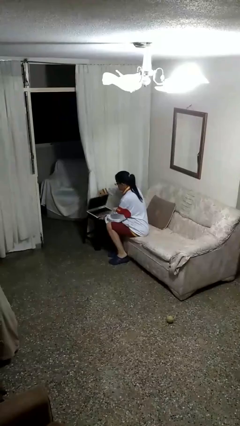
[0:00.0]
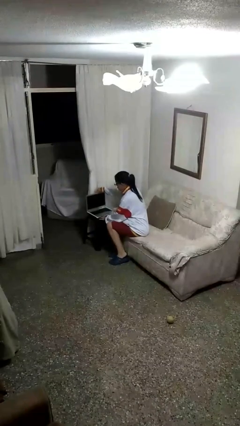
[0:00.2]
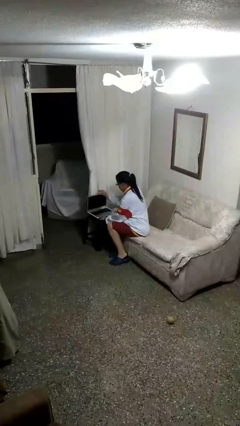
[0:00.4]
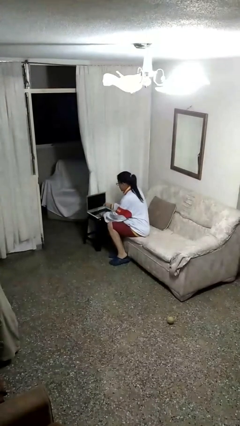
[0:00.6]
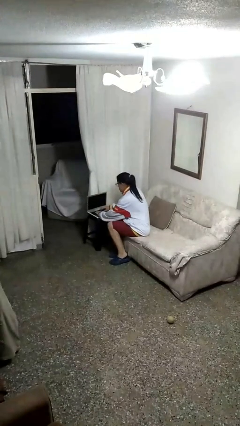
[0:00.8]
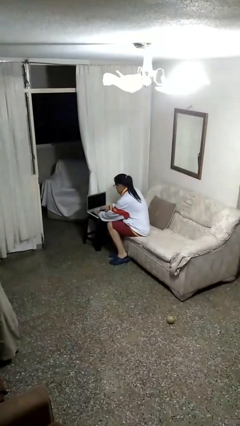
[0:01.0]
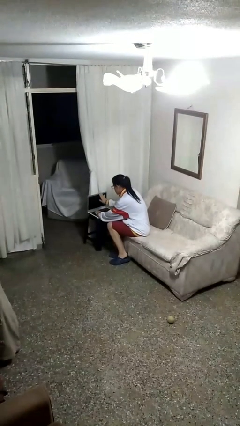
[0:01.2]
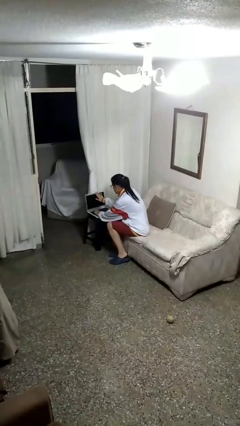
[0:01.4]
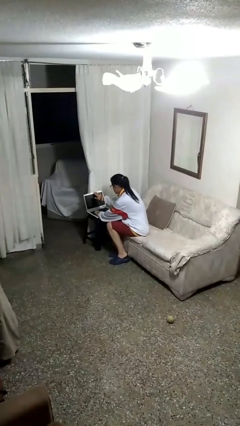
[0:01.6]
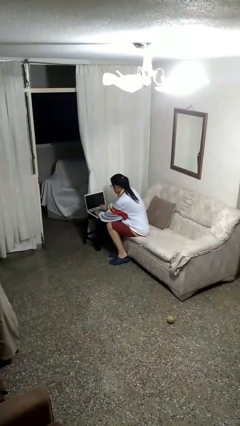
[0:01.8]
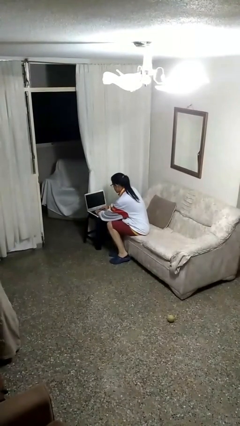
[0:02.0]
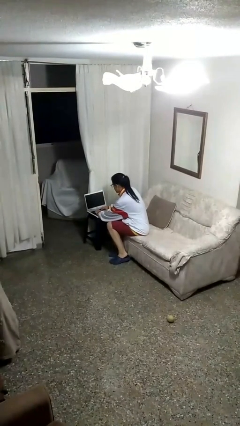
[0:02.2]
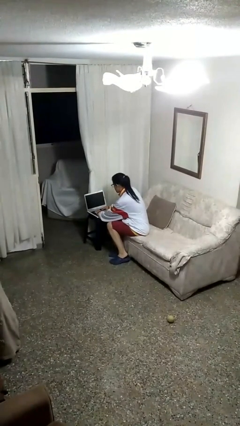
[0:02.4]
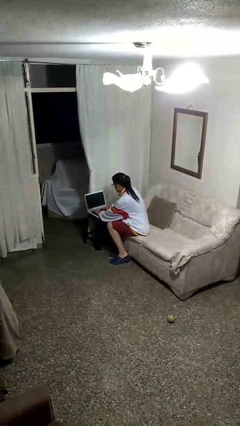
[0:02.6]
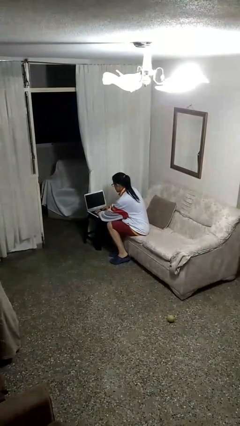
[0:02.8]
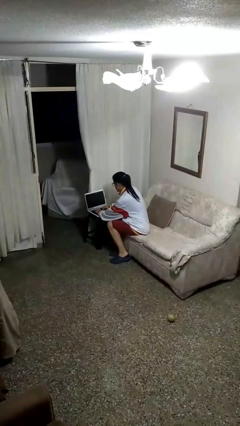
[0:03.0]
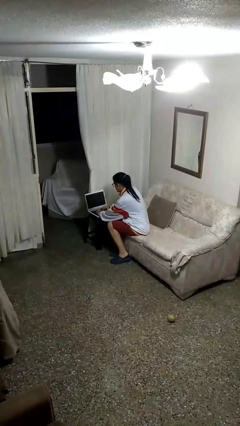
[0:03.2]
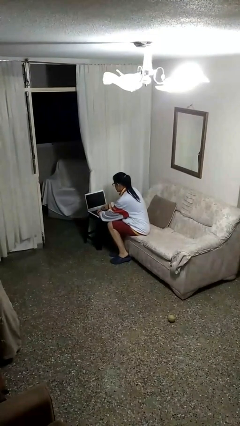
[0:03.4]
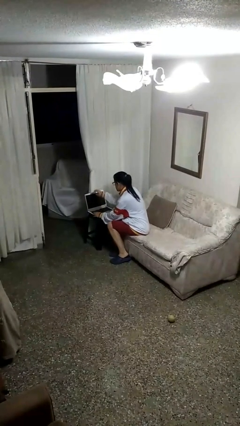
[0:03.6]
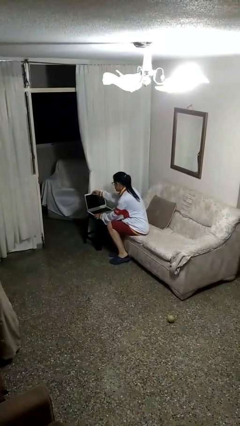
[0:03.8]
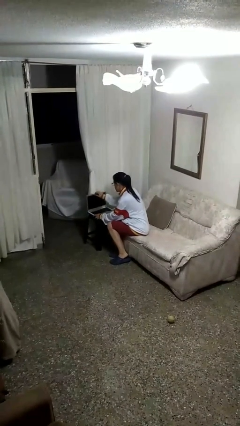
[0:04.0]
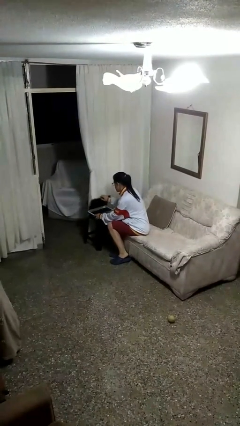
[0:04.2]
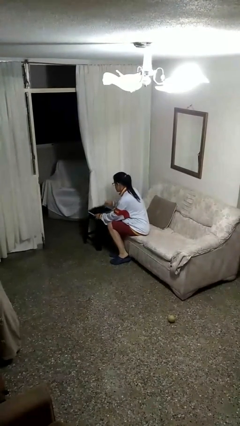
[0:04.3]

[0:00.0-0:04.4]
person interacts with laptop

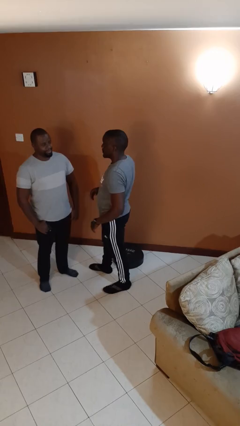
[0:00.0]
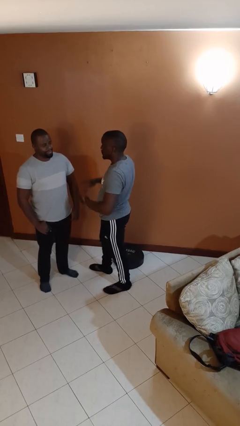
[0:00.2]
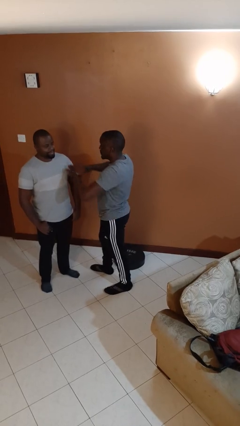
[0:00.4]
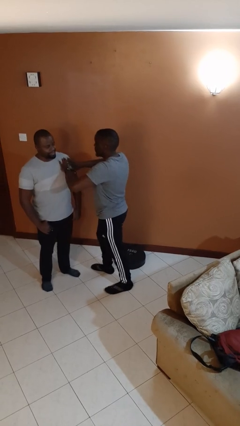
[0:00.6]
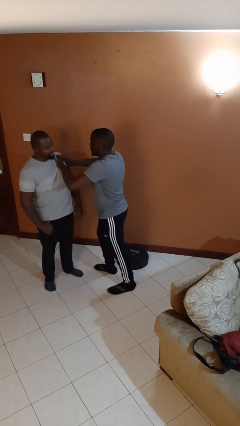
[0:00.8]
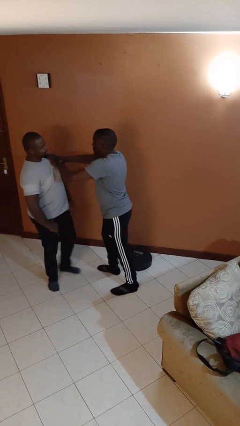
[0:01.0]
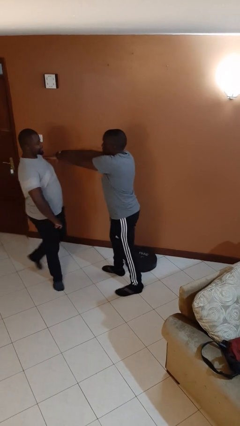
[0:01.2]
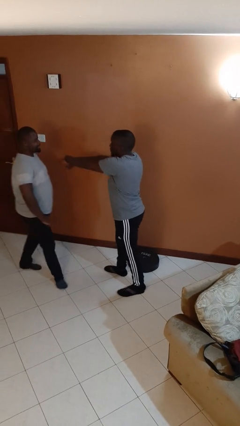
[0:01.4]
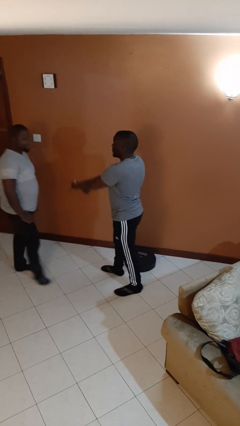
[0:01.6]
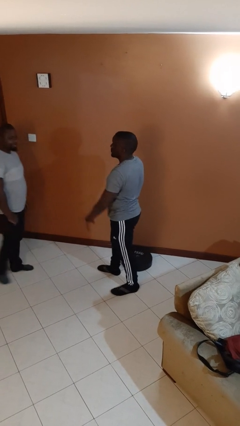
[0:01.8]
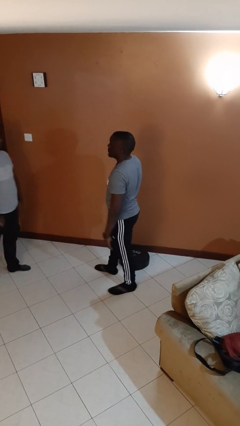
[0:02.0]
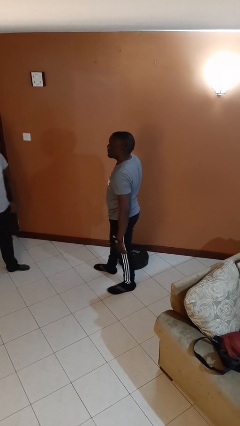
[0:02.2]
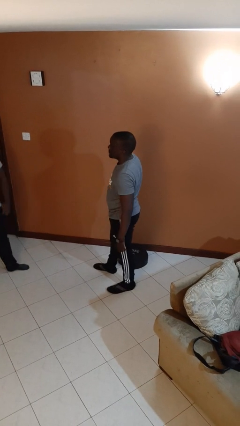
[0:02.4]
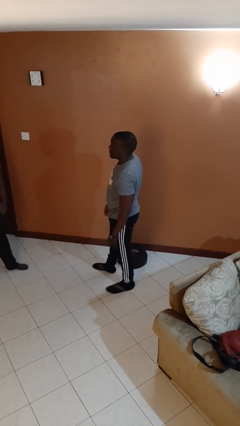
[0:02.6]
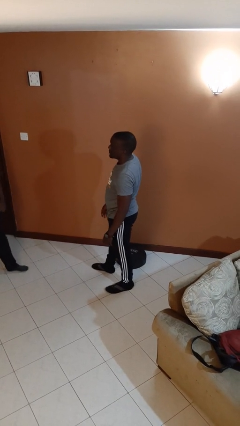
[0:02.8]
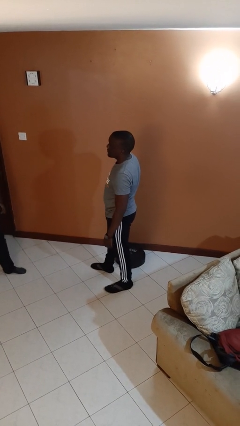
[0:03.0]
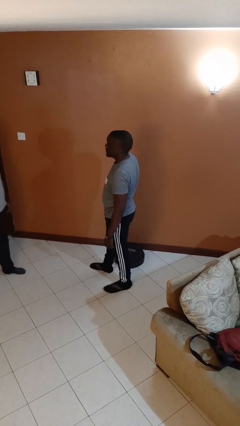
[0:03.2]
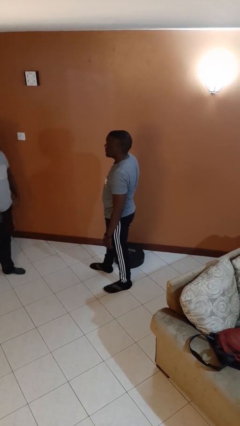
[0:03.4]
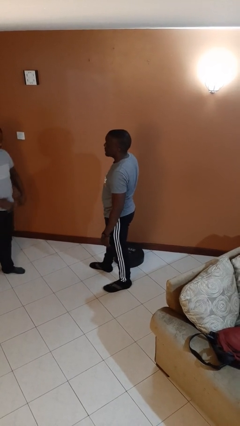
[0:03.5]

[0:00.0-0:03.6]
person shoves person

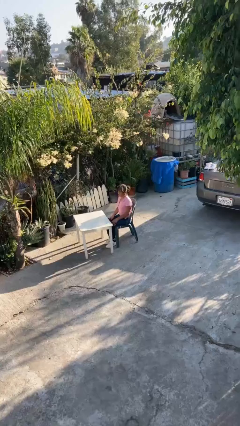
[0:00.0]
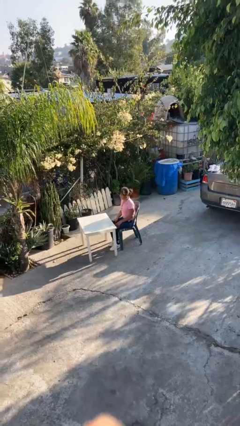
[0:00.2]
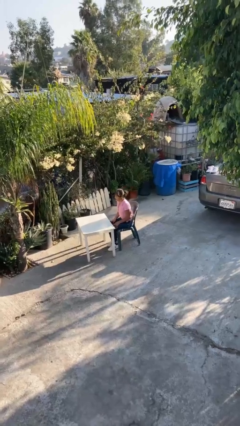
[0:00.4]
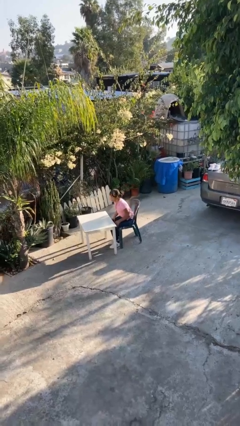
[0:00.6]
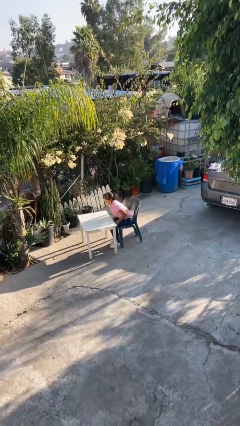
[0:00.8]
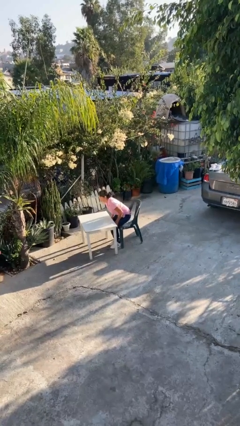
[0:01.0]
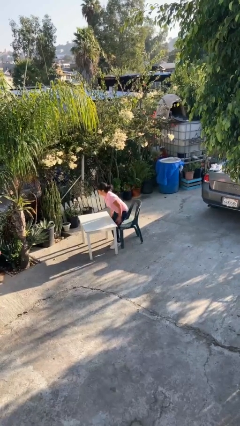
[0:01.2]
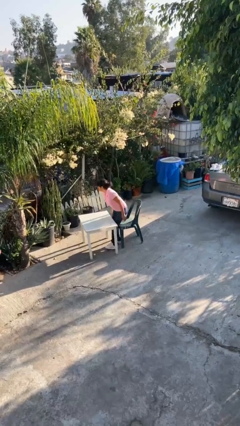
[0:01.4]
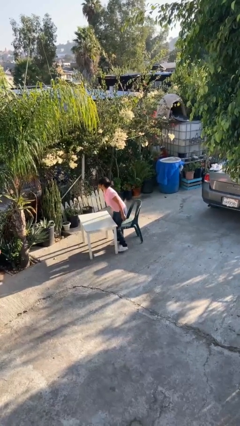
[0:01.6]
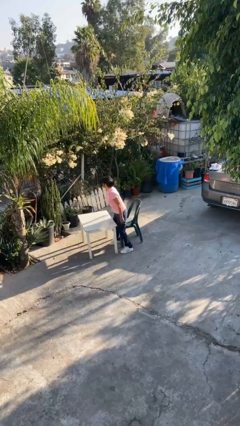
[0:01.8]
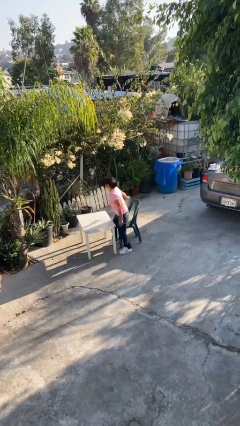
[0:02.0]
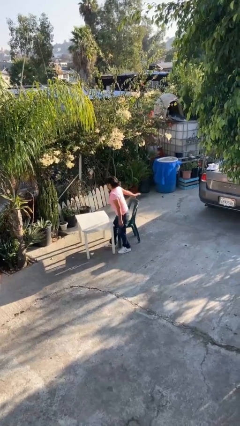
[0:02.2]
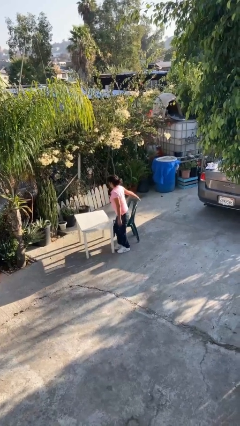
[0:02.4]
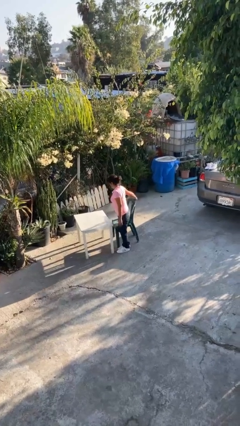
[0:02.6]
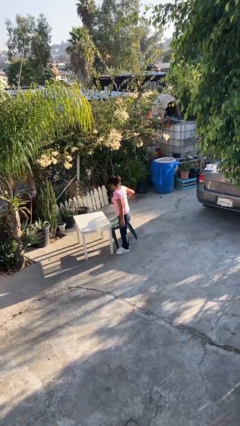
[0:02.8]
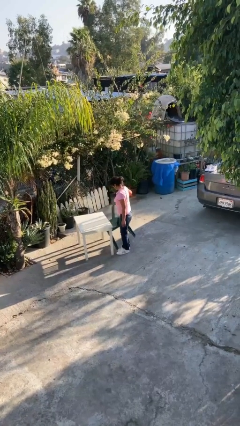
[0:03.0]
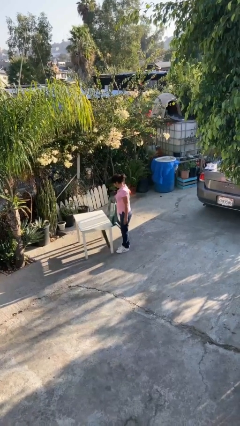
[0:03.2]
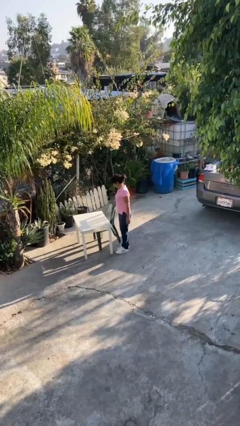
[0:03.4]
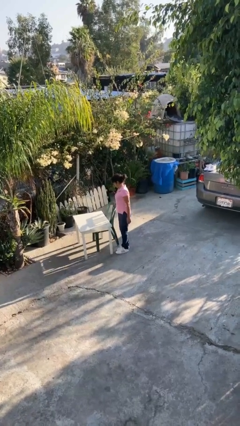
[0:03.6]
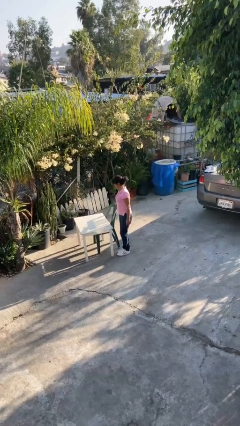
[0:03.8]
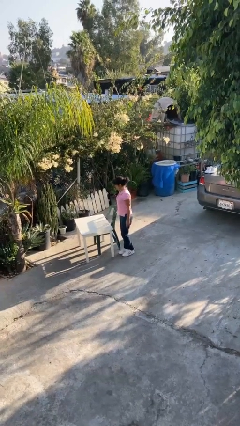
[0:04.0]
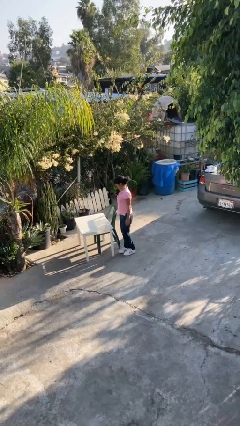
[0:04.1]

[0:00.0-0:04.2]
person stands up

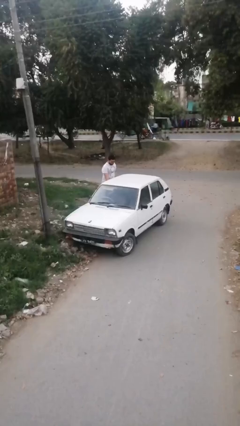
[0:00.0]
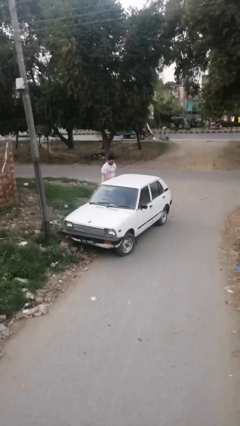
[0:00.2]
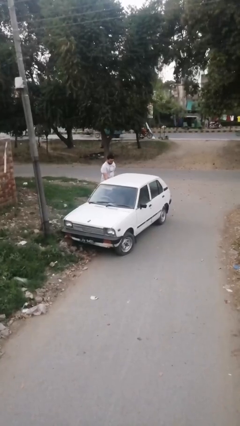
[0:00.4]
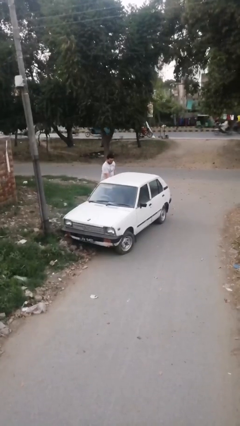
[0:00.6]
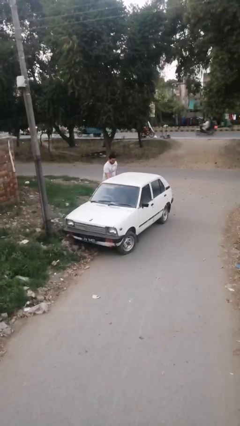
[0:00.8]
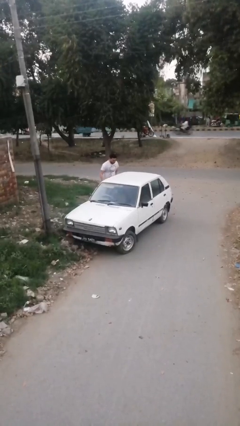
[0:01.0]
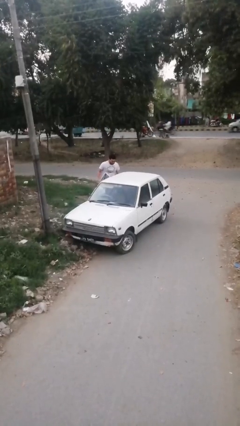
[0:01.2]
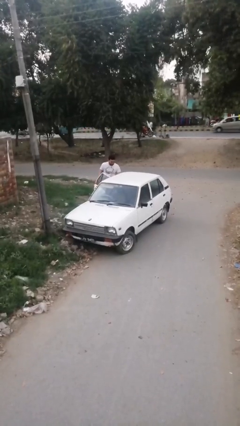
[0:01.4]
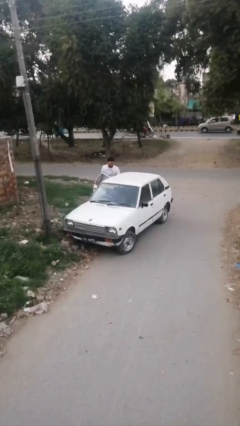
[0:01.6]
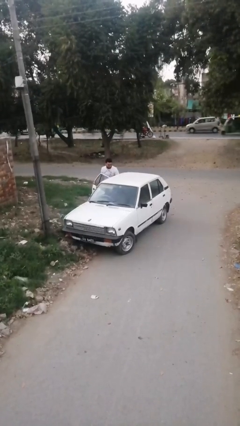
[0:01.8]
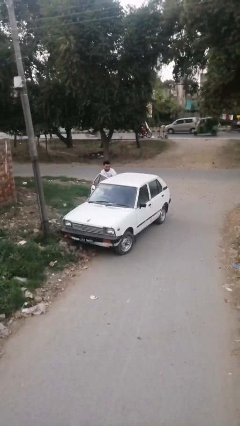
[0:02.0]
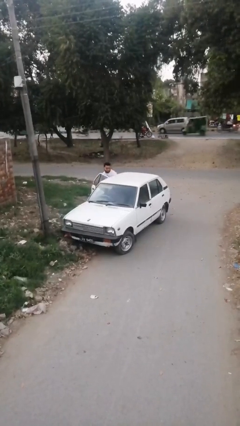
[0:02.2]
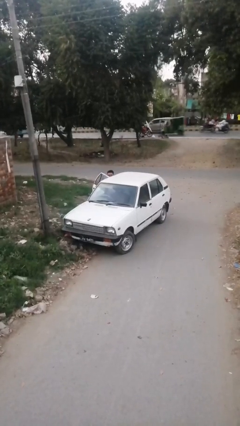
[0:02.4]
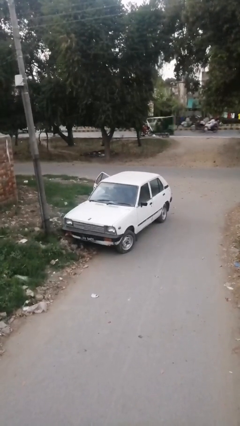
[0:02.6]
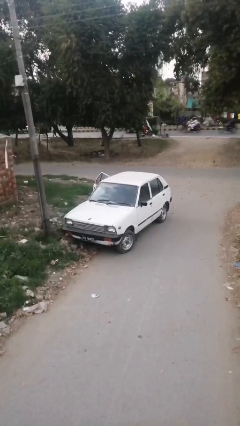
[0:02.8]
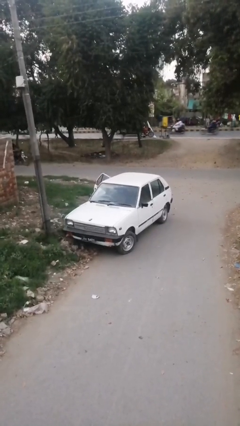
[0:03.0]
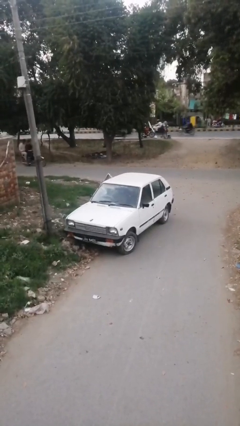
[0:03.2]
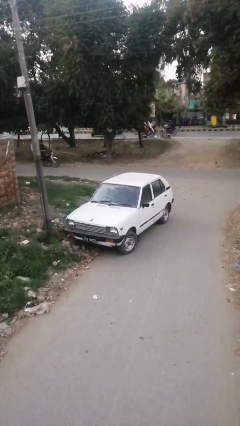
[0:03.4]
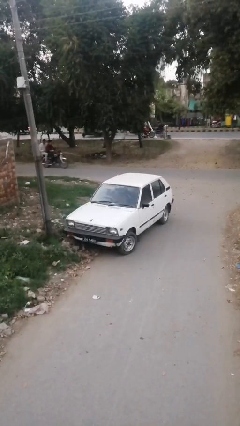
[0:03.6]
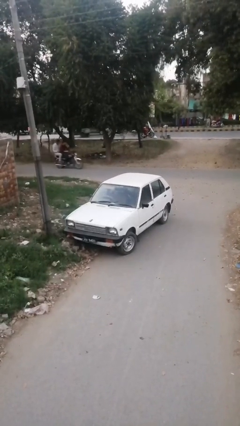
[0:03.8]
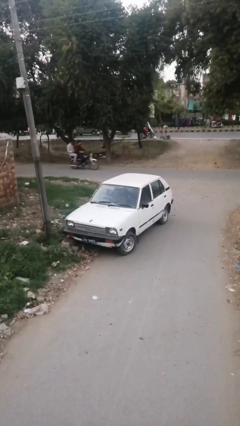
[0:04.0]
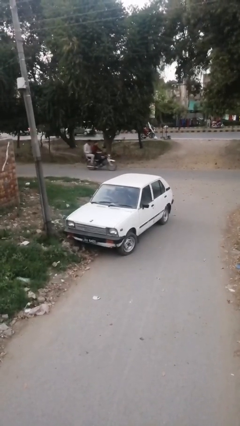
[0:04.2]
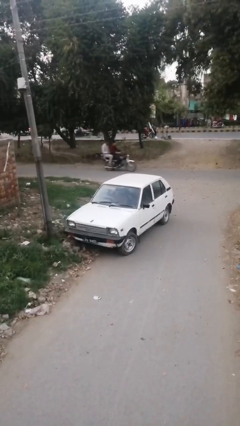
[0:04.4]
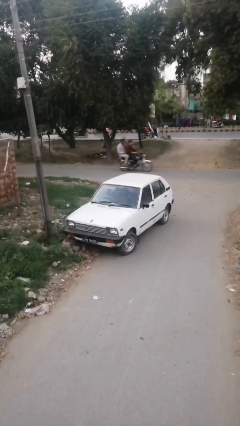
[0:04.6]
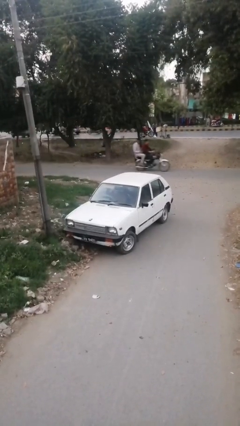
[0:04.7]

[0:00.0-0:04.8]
car picks up person

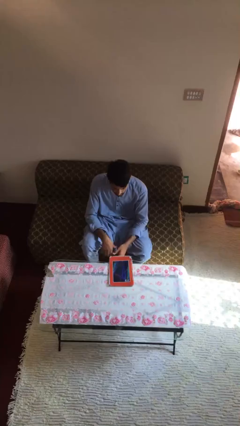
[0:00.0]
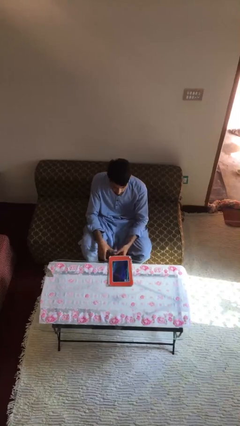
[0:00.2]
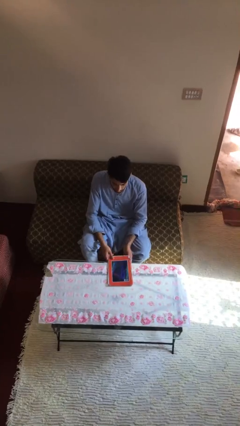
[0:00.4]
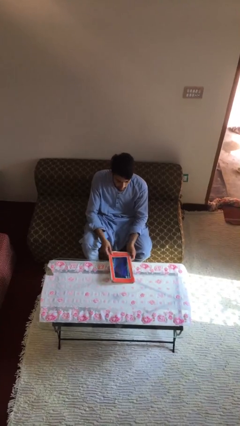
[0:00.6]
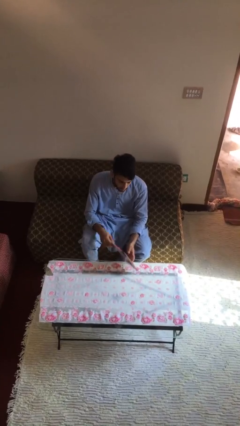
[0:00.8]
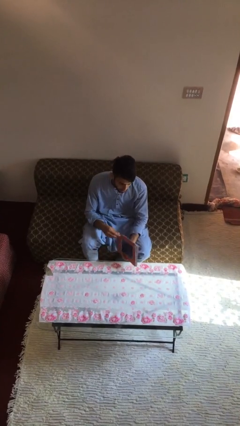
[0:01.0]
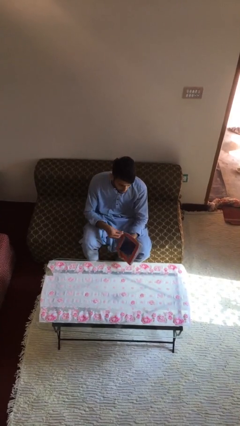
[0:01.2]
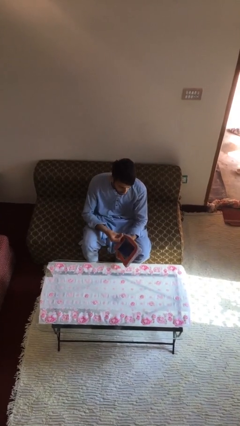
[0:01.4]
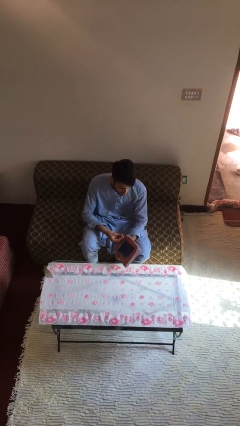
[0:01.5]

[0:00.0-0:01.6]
person picks up object from table
